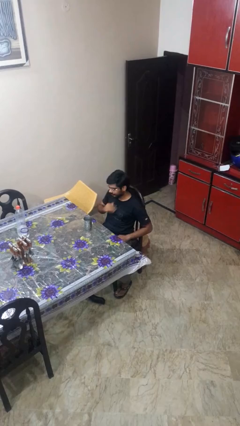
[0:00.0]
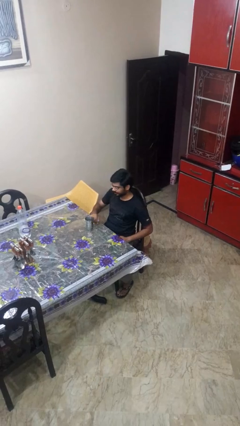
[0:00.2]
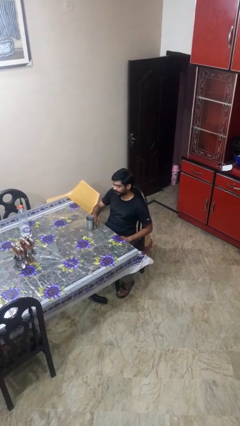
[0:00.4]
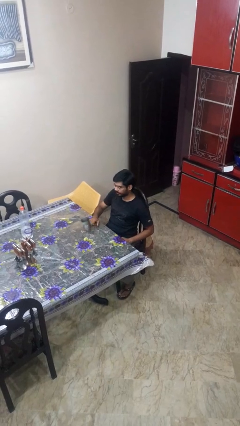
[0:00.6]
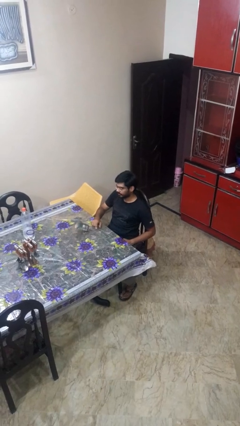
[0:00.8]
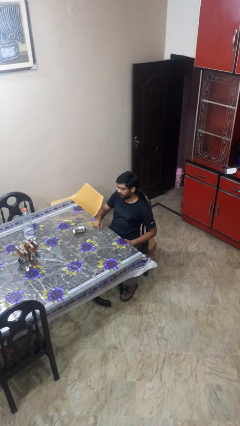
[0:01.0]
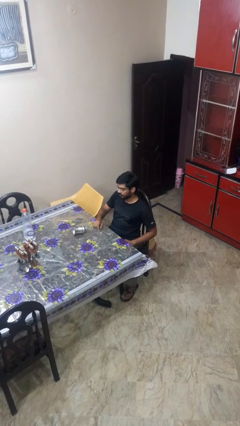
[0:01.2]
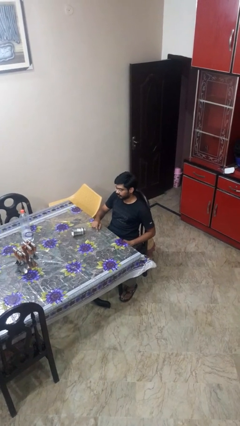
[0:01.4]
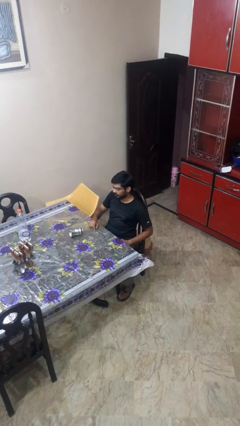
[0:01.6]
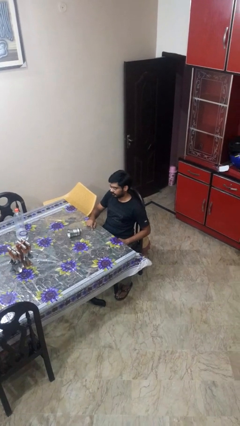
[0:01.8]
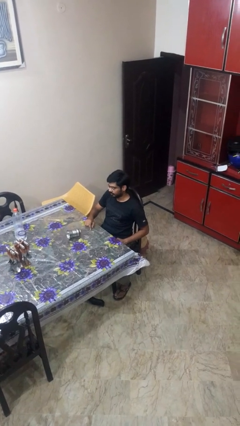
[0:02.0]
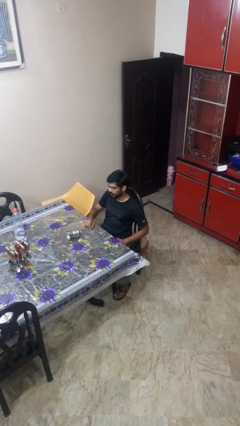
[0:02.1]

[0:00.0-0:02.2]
person knocks over glass

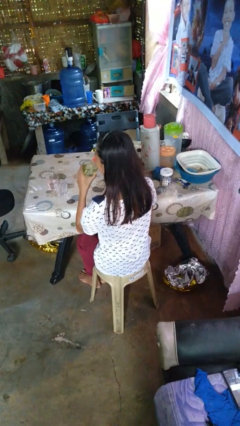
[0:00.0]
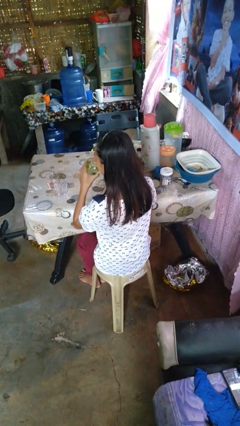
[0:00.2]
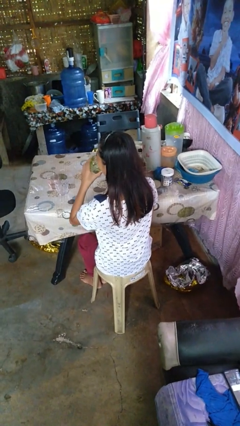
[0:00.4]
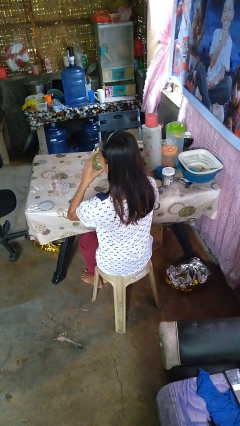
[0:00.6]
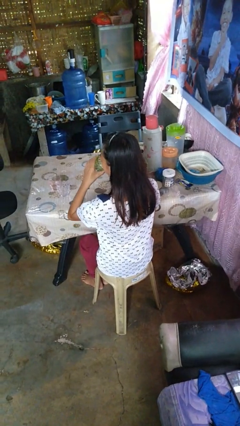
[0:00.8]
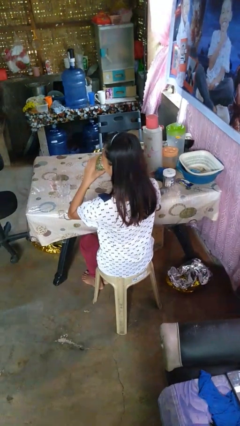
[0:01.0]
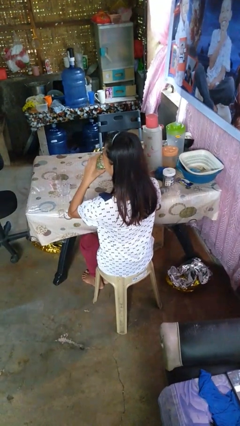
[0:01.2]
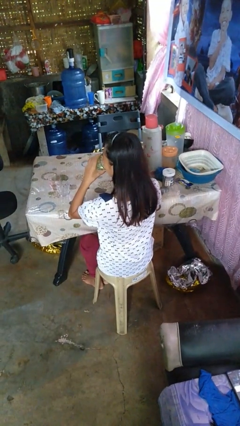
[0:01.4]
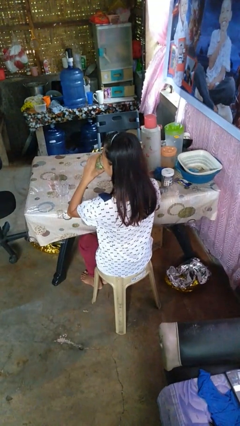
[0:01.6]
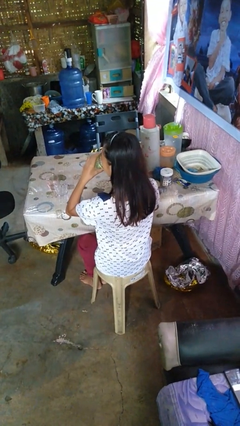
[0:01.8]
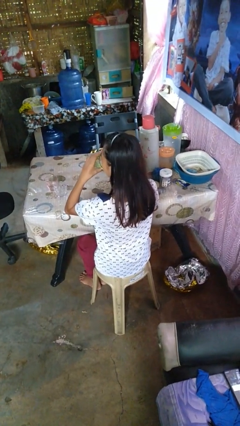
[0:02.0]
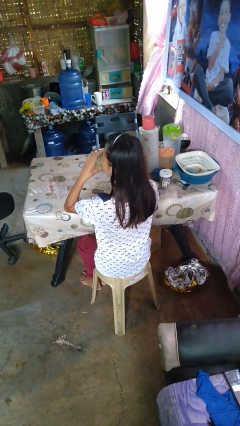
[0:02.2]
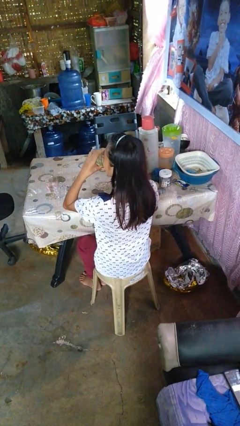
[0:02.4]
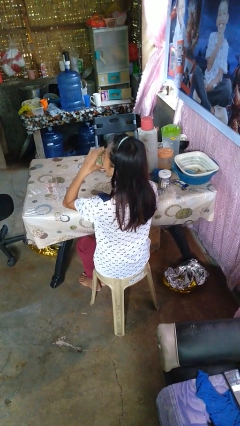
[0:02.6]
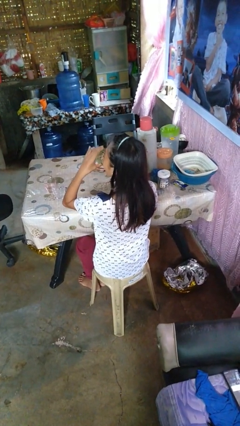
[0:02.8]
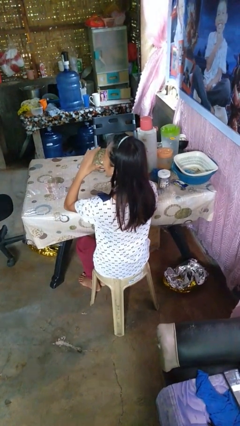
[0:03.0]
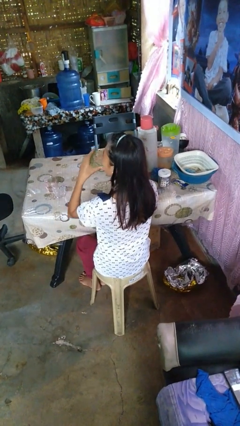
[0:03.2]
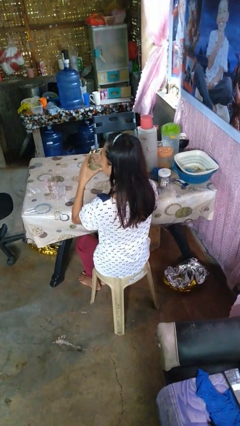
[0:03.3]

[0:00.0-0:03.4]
person drinks from shotglass

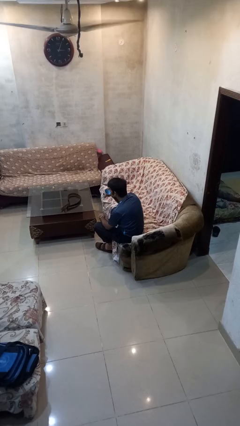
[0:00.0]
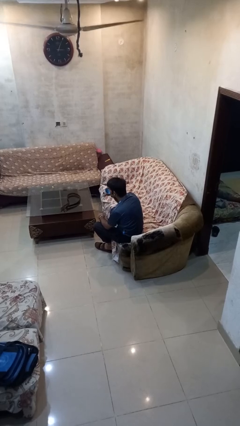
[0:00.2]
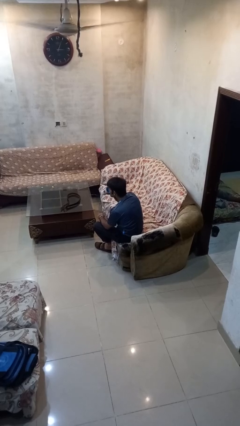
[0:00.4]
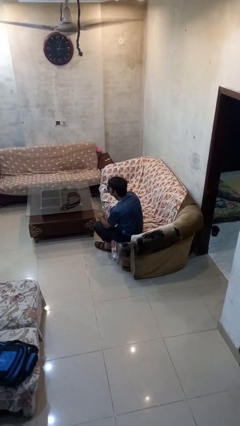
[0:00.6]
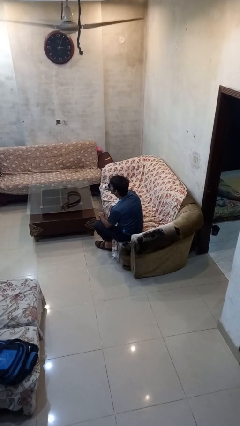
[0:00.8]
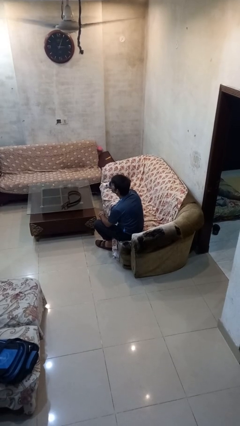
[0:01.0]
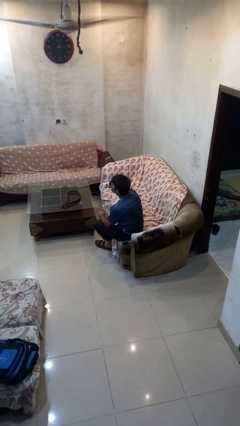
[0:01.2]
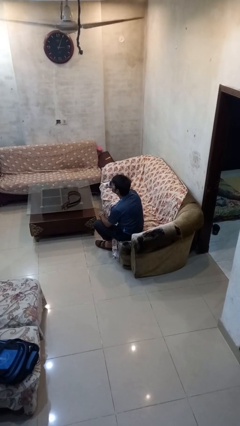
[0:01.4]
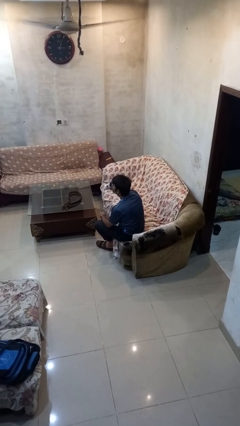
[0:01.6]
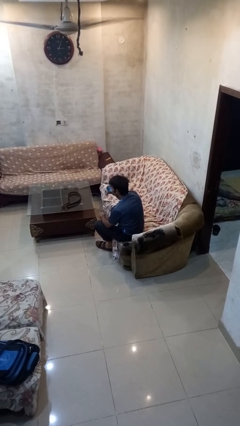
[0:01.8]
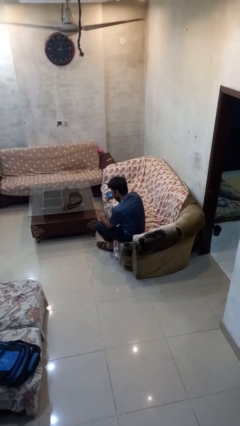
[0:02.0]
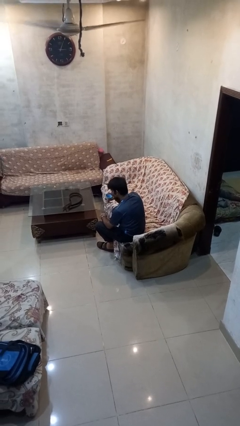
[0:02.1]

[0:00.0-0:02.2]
person drinks from mug

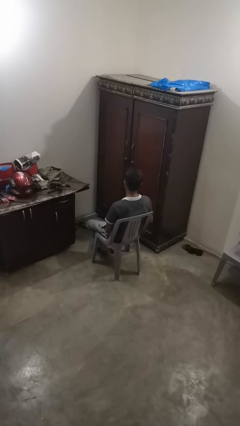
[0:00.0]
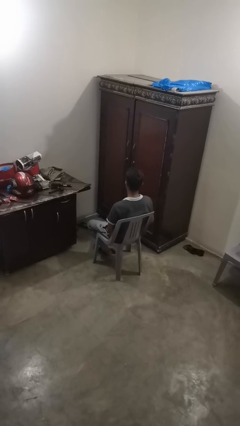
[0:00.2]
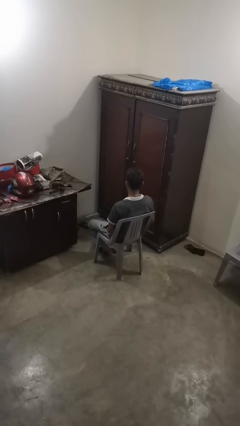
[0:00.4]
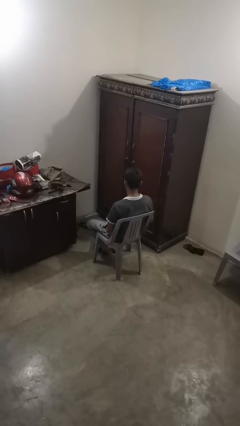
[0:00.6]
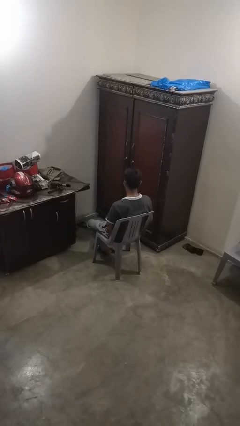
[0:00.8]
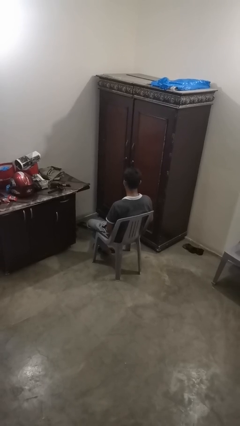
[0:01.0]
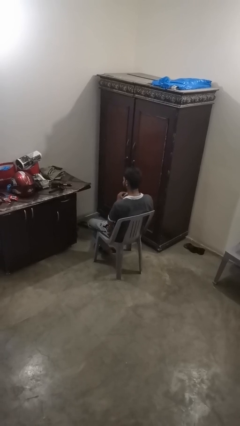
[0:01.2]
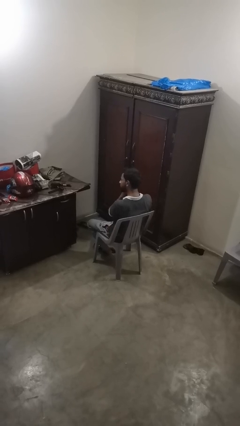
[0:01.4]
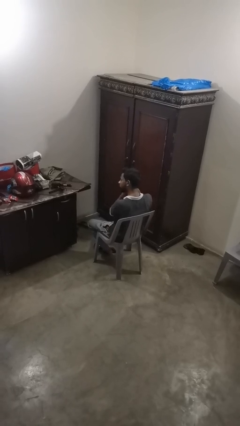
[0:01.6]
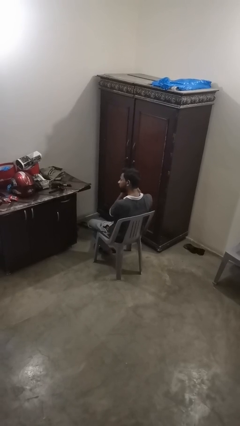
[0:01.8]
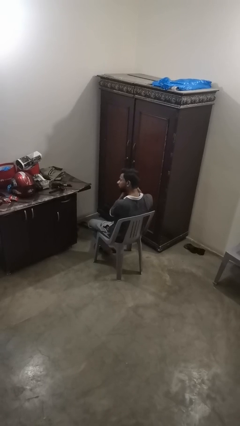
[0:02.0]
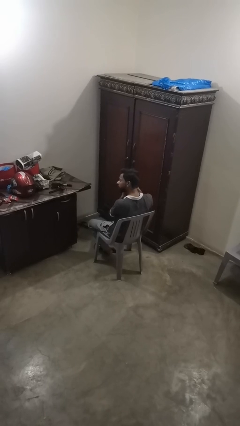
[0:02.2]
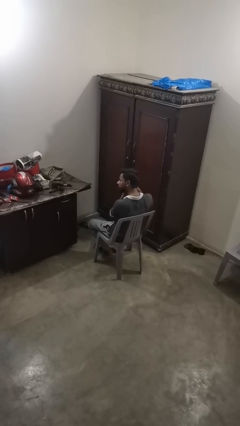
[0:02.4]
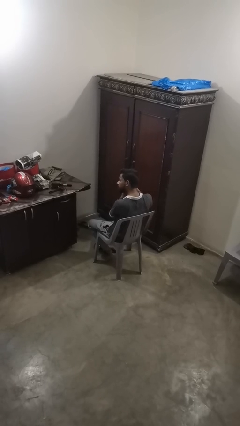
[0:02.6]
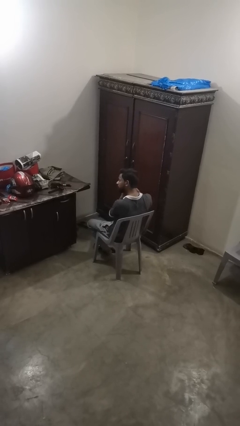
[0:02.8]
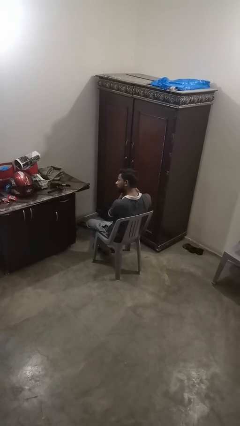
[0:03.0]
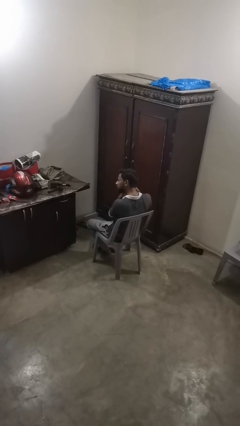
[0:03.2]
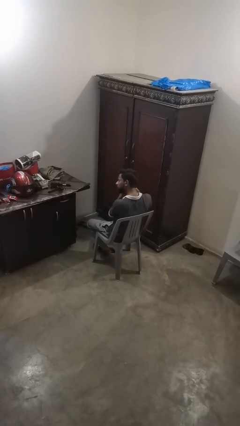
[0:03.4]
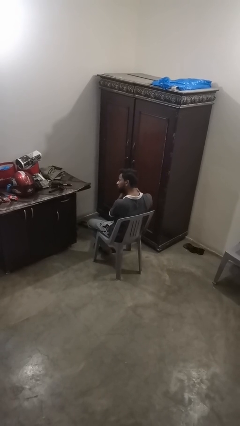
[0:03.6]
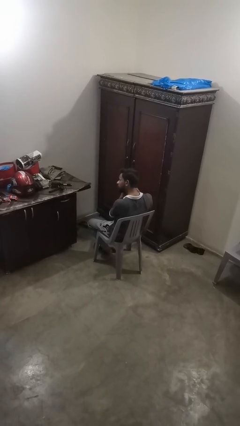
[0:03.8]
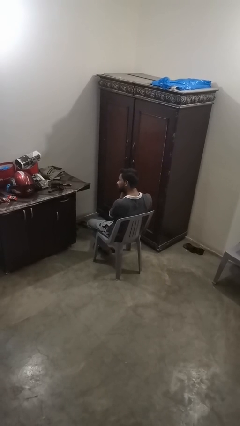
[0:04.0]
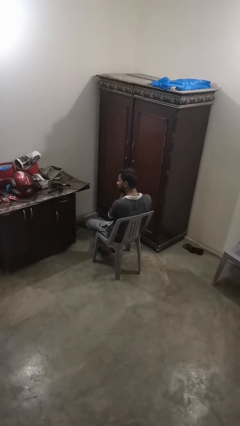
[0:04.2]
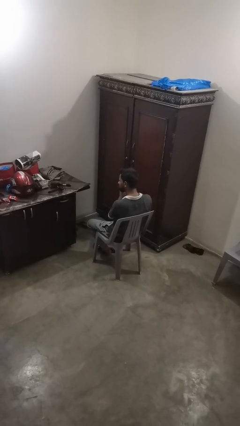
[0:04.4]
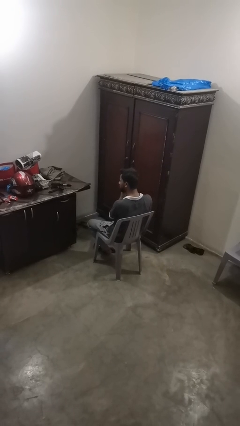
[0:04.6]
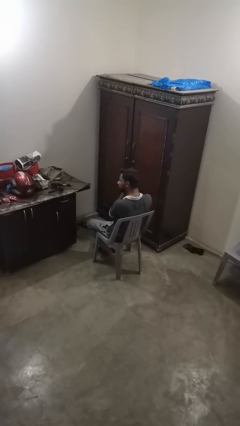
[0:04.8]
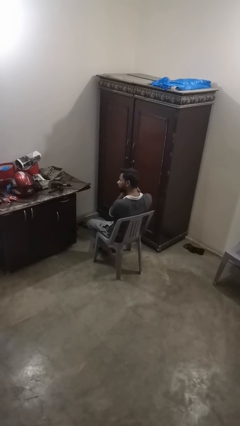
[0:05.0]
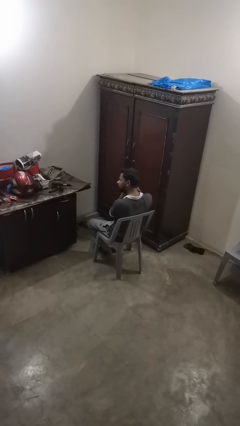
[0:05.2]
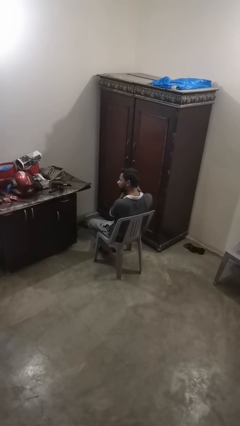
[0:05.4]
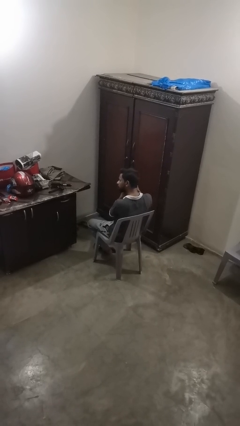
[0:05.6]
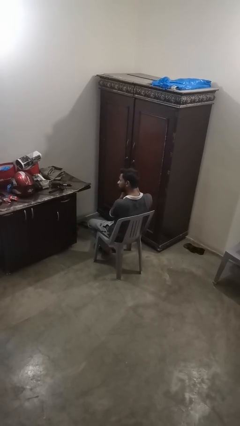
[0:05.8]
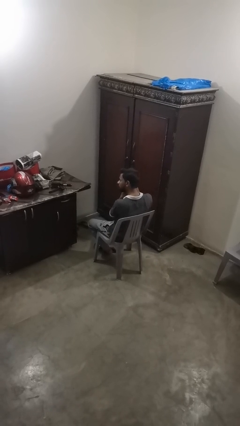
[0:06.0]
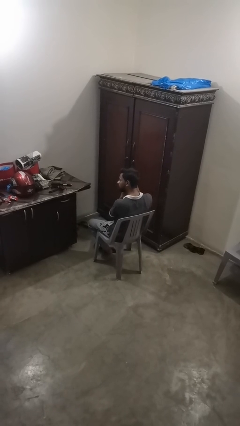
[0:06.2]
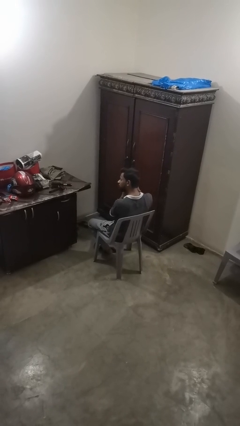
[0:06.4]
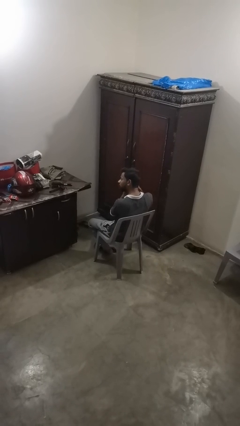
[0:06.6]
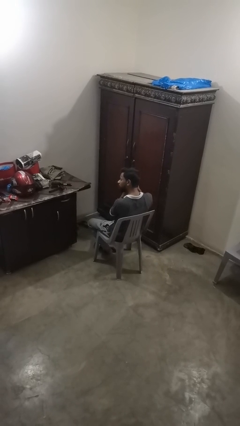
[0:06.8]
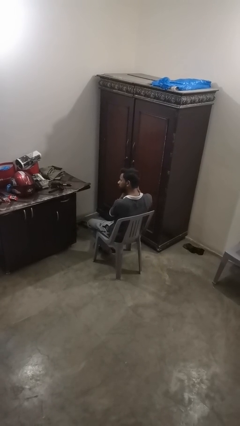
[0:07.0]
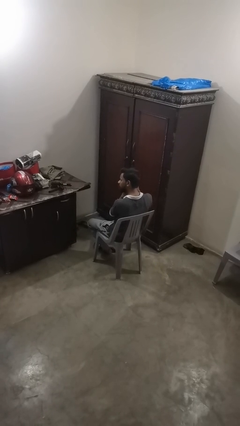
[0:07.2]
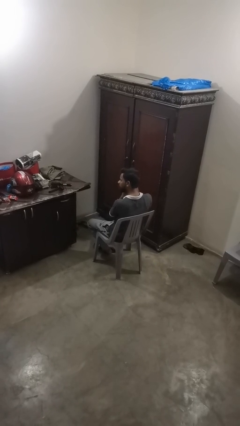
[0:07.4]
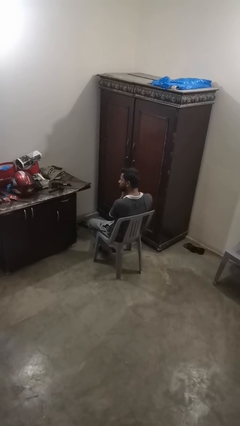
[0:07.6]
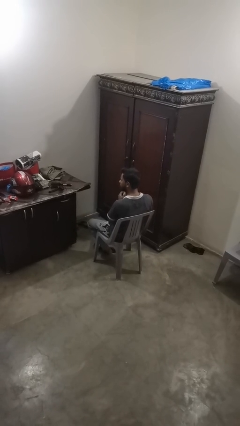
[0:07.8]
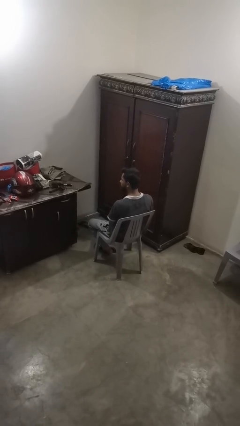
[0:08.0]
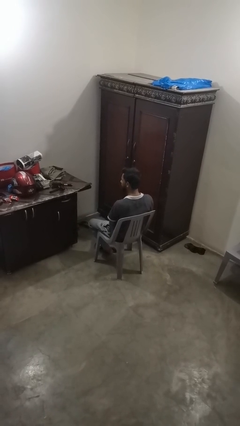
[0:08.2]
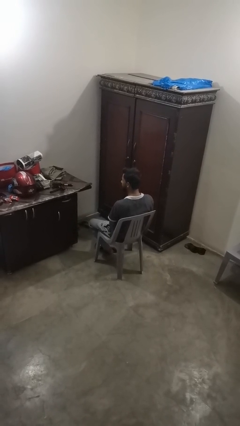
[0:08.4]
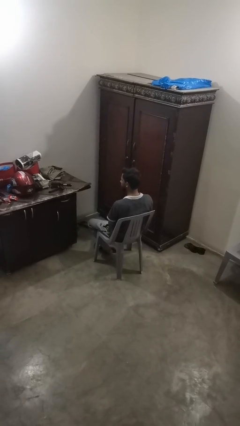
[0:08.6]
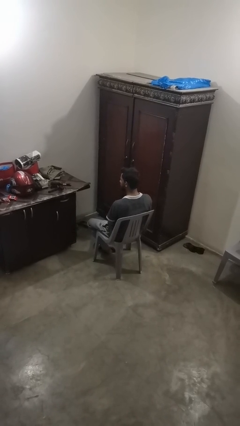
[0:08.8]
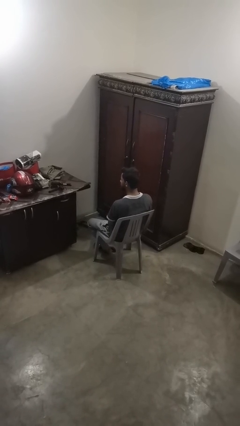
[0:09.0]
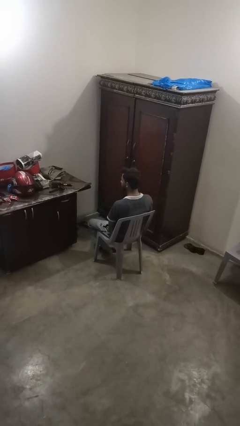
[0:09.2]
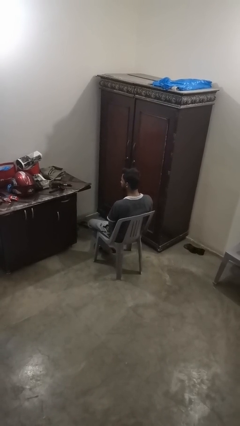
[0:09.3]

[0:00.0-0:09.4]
person puts on earrings

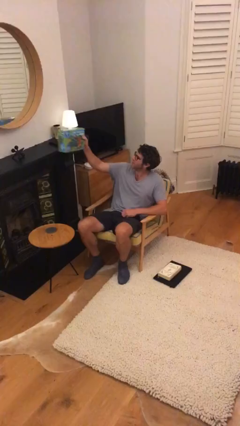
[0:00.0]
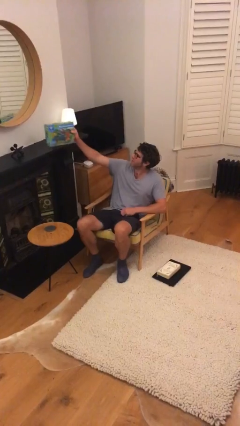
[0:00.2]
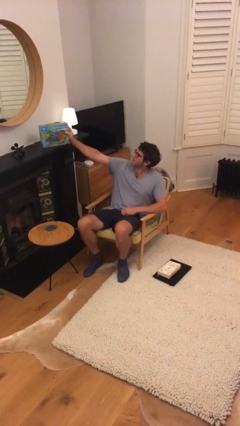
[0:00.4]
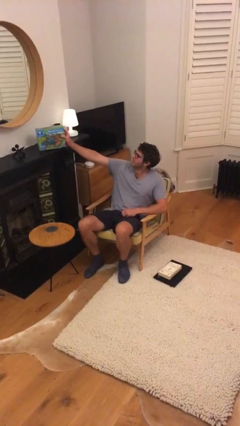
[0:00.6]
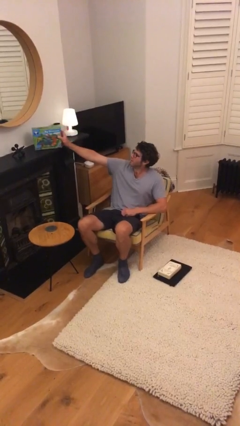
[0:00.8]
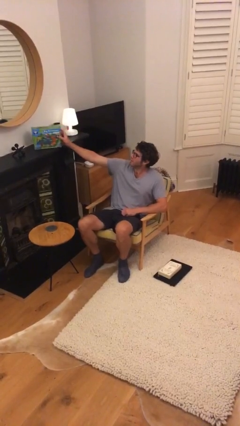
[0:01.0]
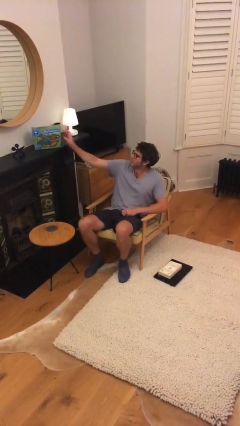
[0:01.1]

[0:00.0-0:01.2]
person puts down object on shelf
